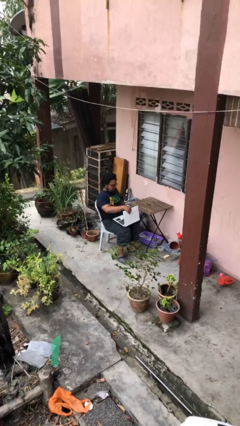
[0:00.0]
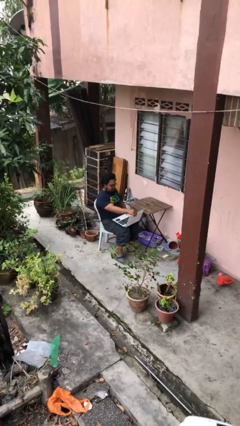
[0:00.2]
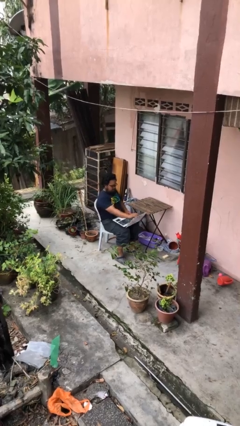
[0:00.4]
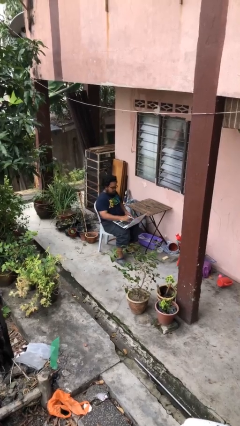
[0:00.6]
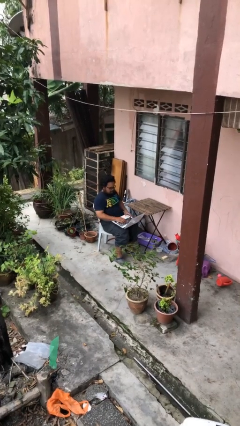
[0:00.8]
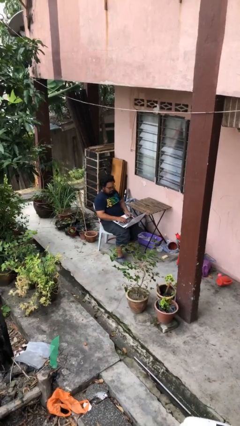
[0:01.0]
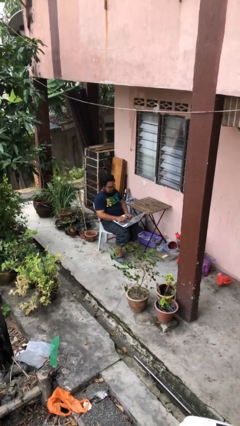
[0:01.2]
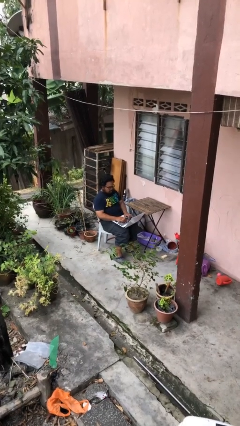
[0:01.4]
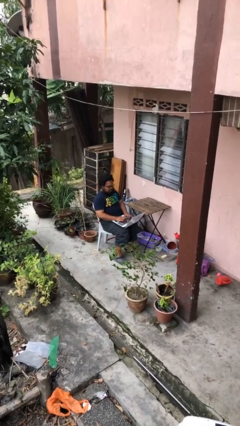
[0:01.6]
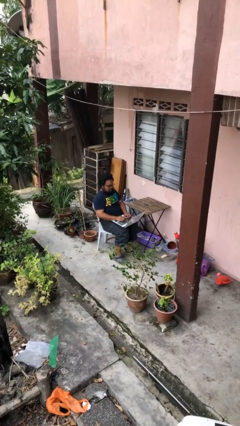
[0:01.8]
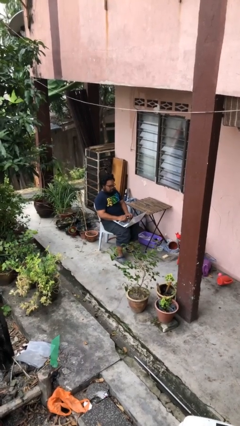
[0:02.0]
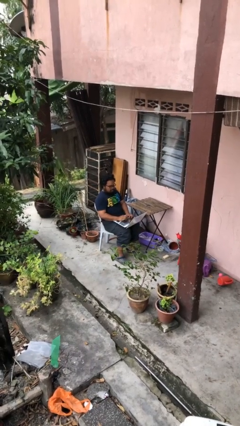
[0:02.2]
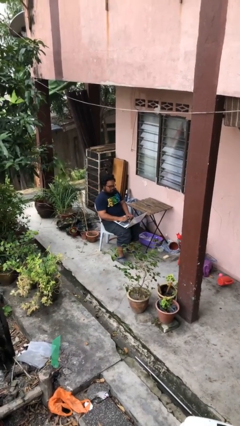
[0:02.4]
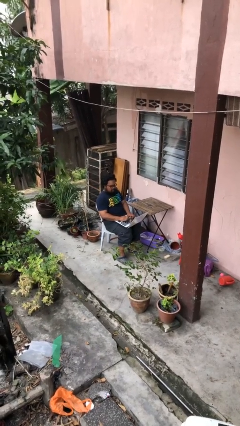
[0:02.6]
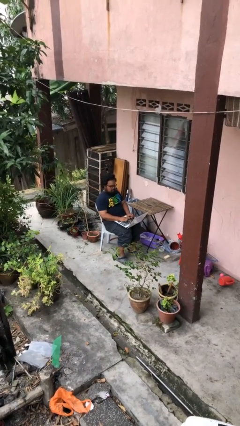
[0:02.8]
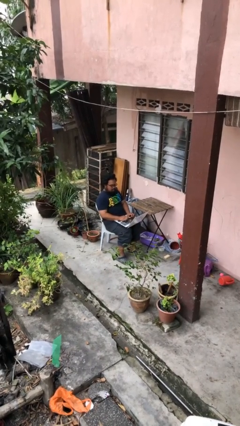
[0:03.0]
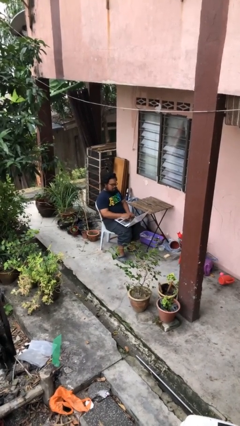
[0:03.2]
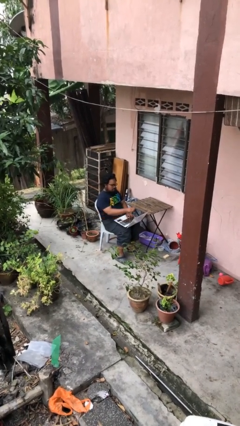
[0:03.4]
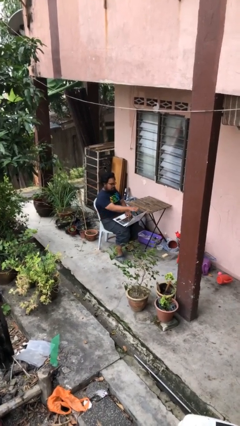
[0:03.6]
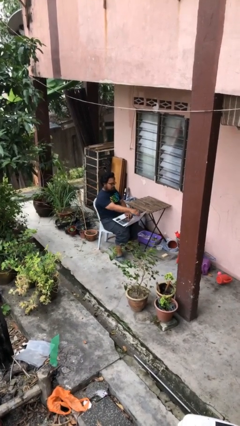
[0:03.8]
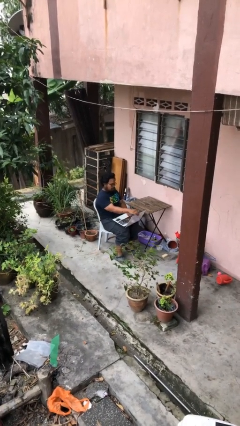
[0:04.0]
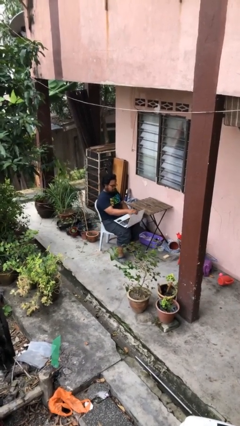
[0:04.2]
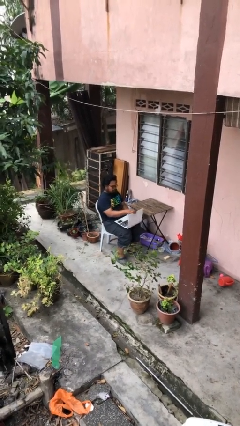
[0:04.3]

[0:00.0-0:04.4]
person interacts with laptop

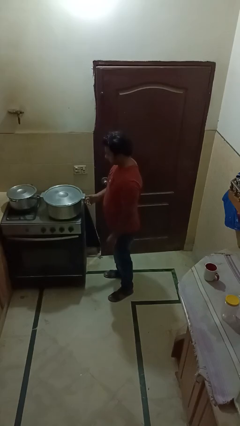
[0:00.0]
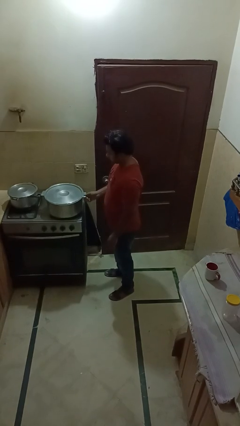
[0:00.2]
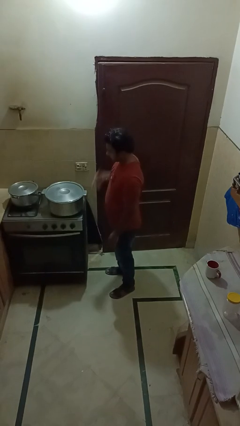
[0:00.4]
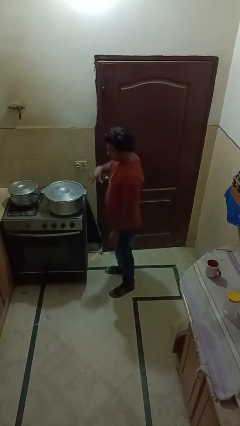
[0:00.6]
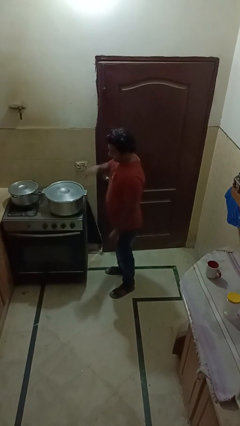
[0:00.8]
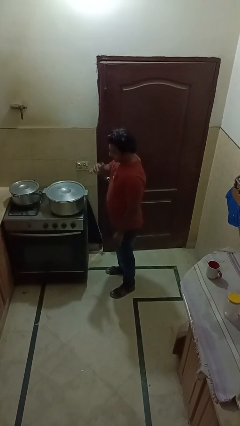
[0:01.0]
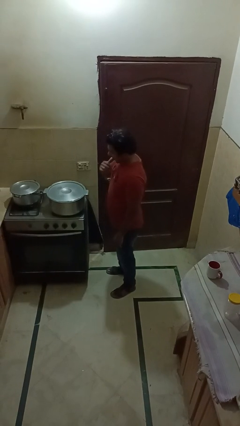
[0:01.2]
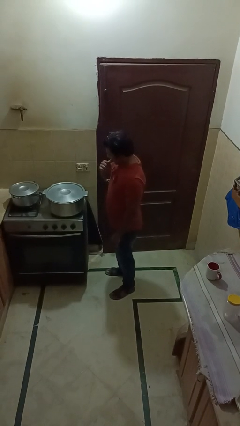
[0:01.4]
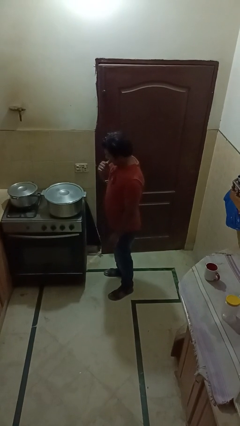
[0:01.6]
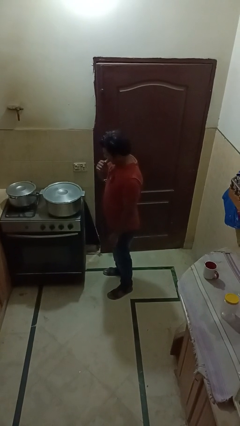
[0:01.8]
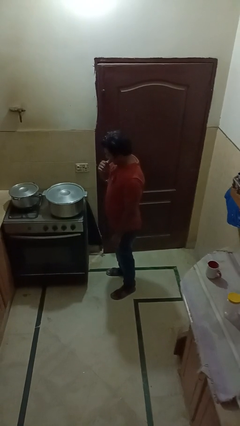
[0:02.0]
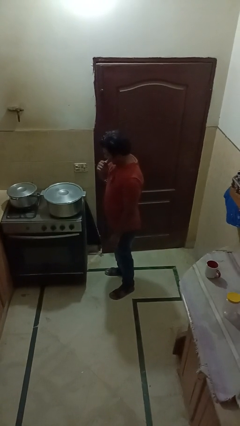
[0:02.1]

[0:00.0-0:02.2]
person burns hand

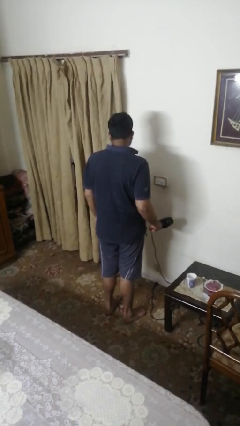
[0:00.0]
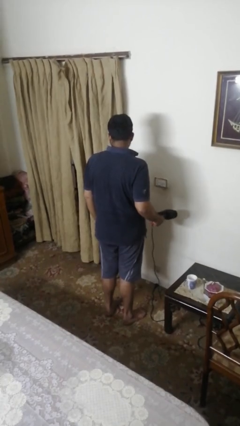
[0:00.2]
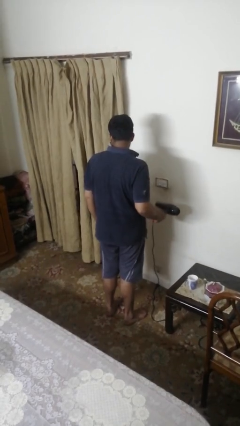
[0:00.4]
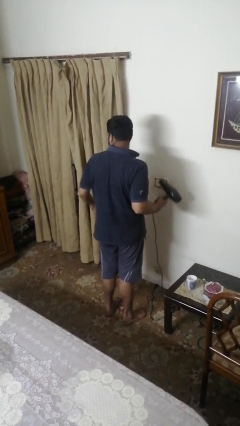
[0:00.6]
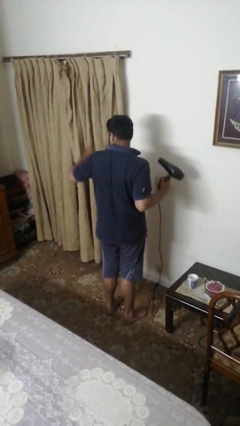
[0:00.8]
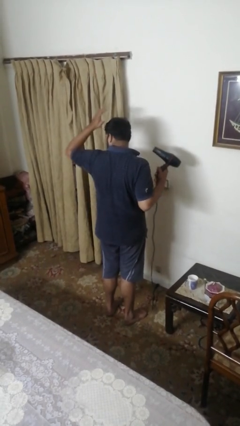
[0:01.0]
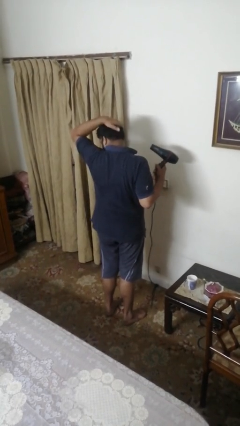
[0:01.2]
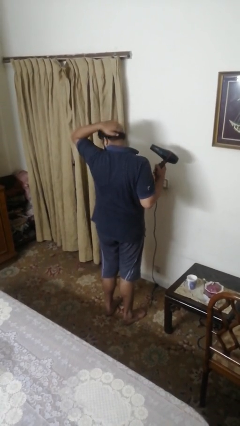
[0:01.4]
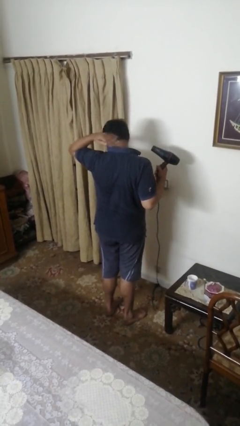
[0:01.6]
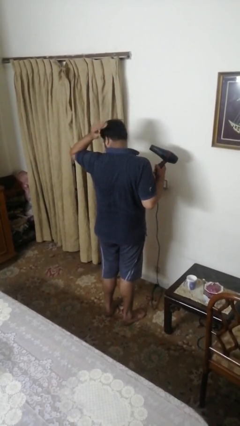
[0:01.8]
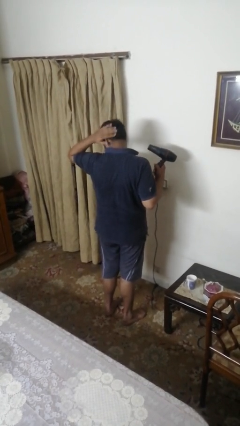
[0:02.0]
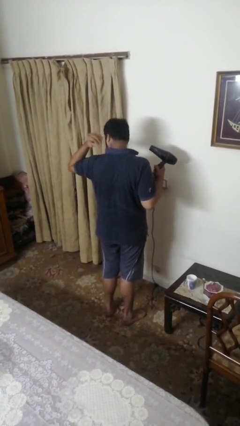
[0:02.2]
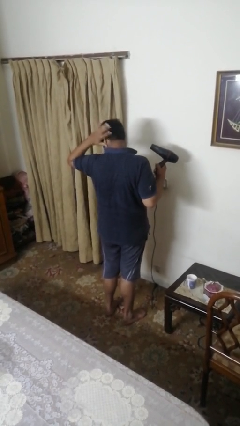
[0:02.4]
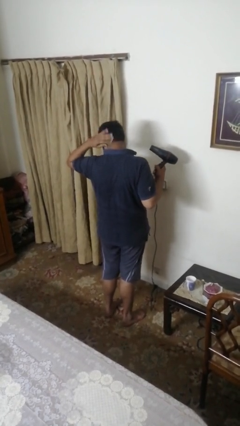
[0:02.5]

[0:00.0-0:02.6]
person dries hair with hairdryer

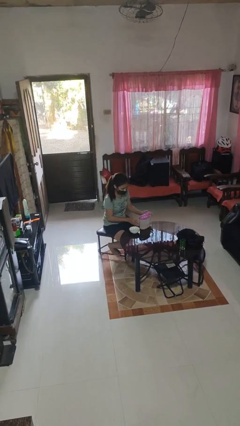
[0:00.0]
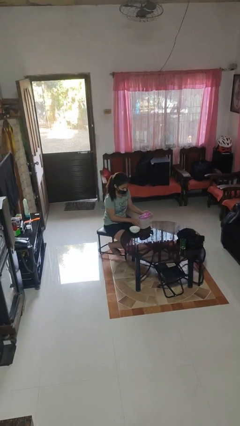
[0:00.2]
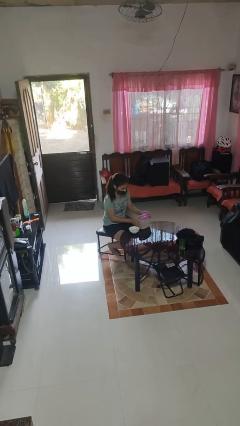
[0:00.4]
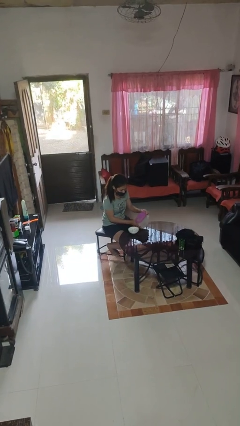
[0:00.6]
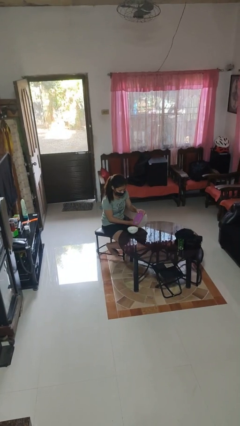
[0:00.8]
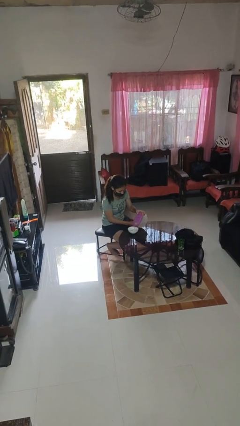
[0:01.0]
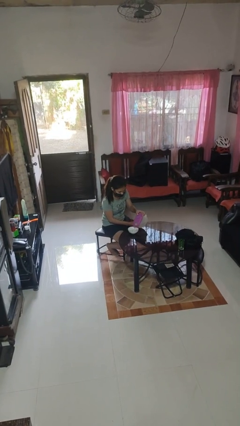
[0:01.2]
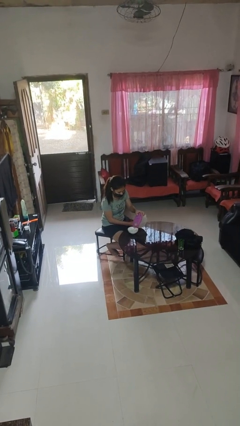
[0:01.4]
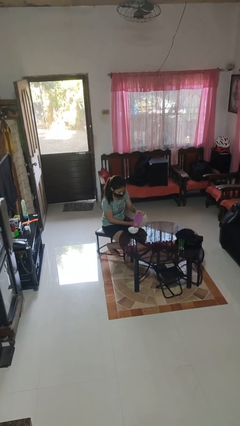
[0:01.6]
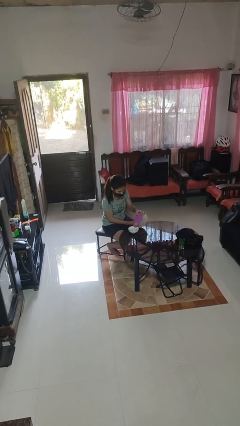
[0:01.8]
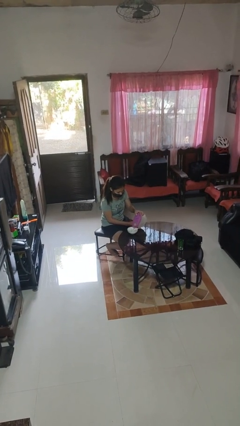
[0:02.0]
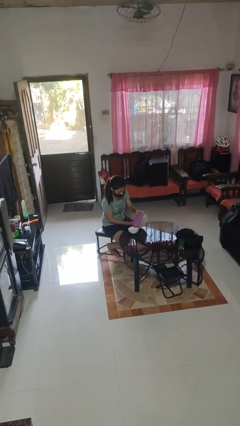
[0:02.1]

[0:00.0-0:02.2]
person pours into bowl

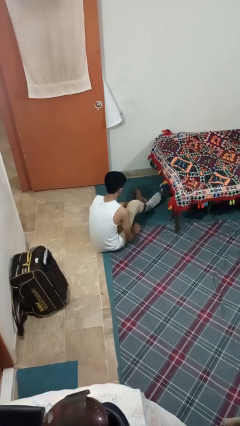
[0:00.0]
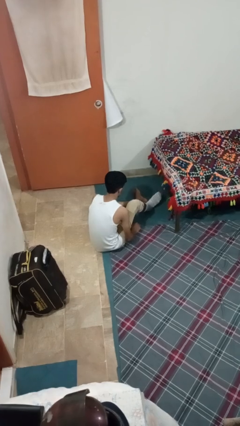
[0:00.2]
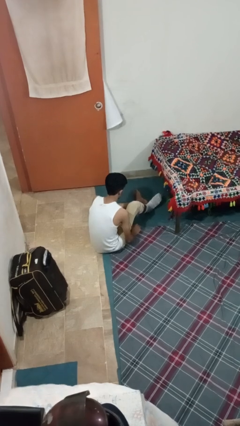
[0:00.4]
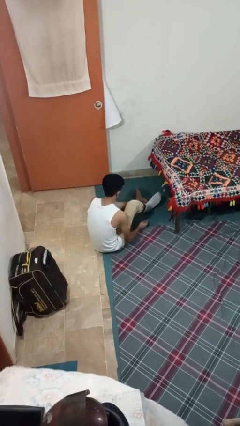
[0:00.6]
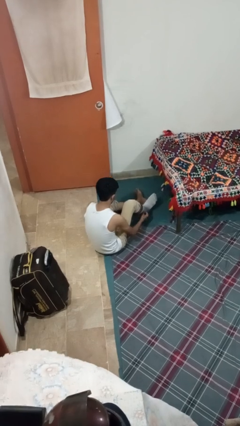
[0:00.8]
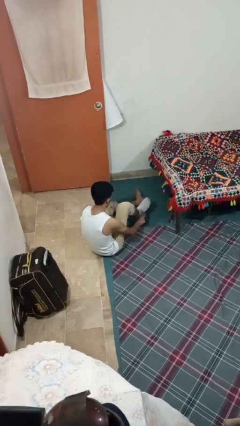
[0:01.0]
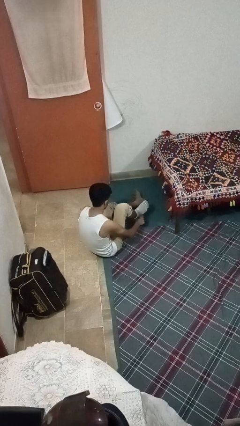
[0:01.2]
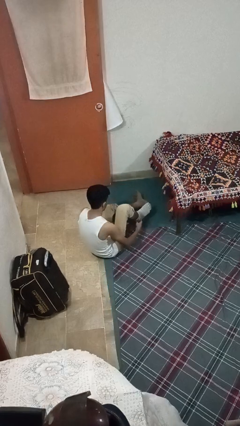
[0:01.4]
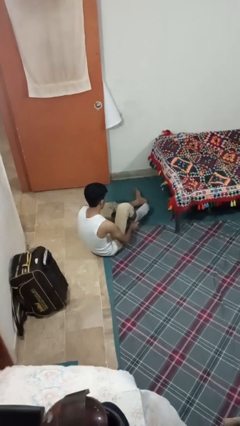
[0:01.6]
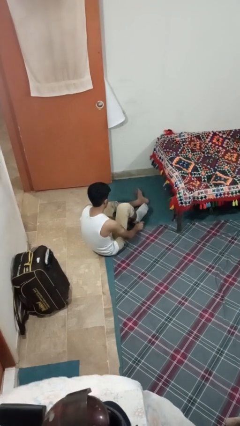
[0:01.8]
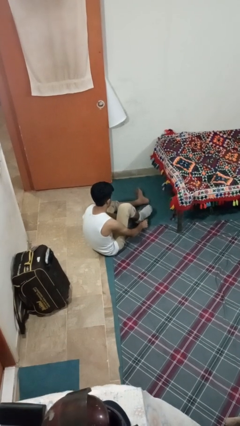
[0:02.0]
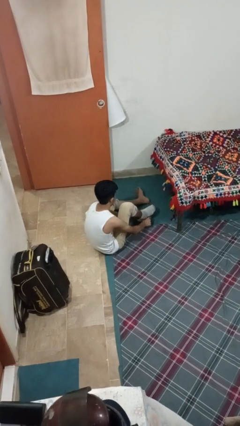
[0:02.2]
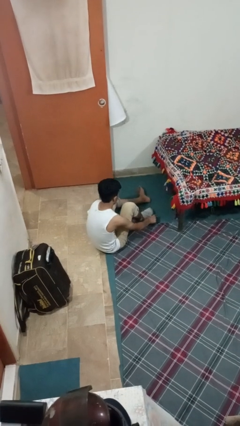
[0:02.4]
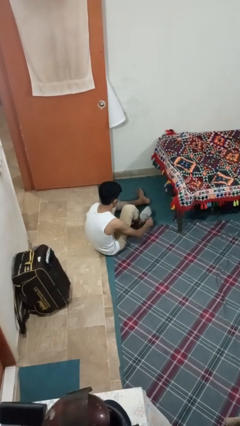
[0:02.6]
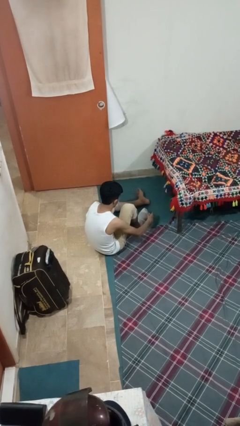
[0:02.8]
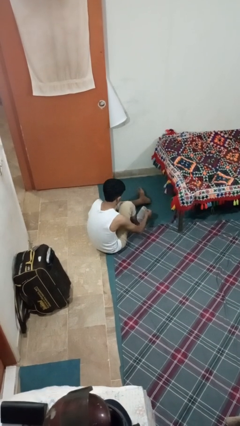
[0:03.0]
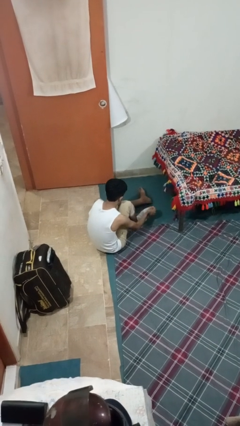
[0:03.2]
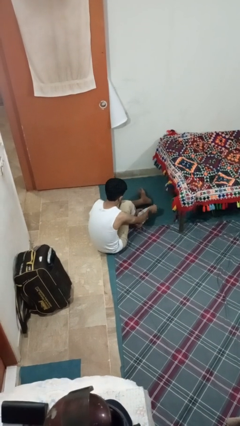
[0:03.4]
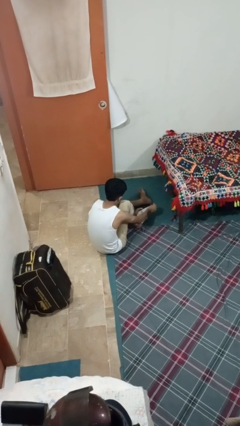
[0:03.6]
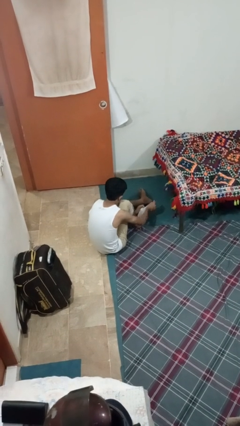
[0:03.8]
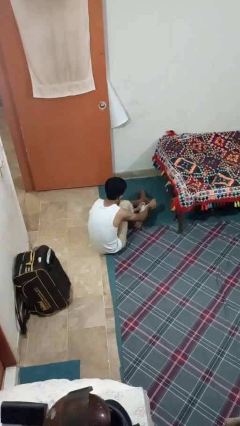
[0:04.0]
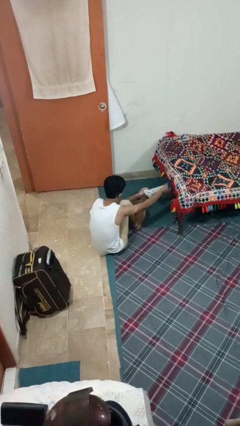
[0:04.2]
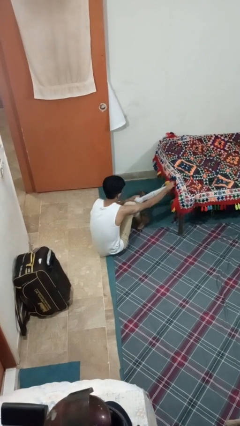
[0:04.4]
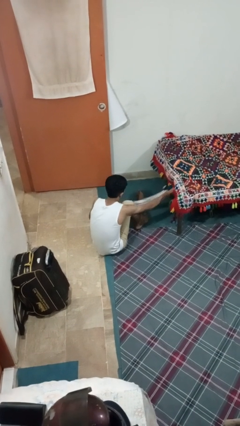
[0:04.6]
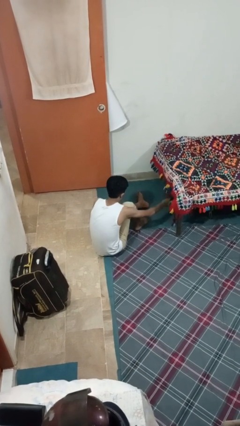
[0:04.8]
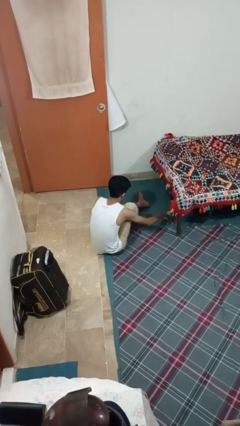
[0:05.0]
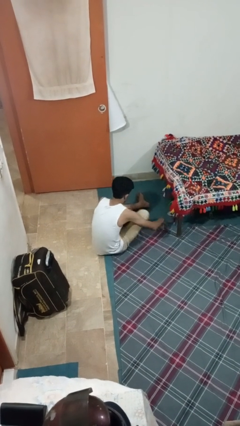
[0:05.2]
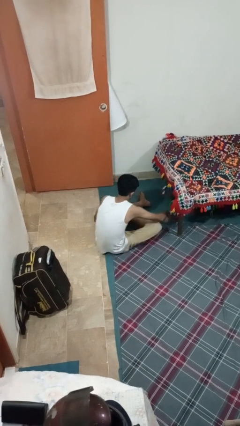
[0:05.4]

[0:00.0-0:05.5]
person takes off socks

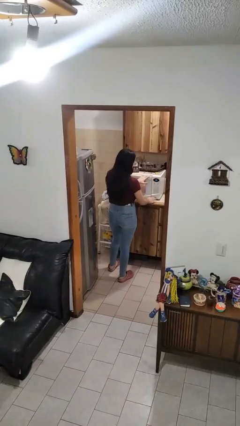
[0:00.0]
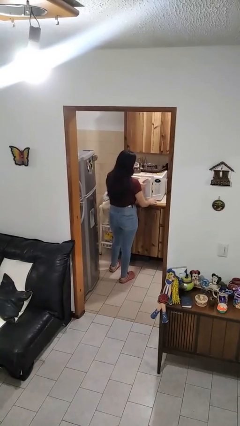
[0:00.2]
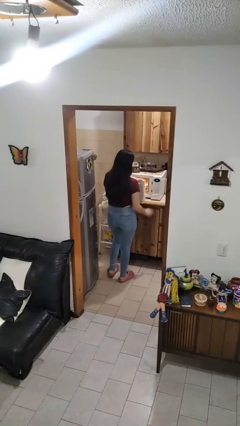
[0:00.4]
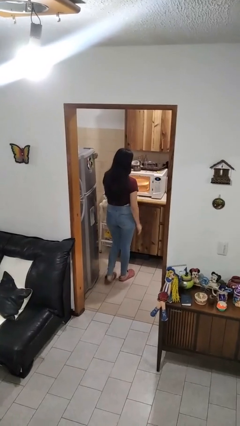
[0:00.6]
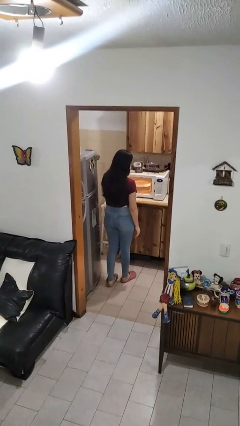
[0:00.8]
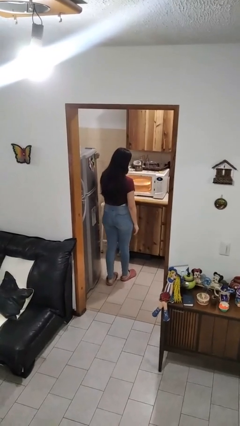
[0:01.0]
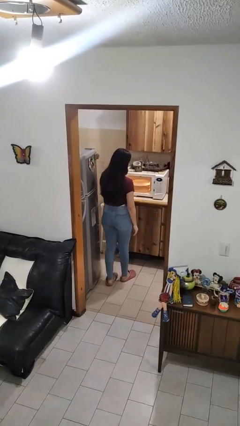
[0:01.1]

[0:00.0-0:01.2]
person opens microwave
